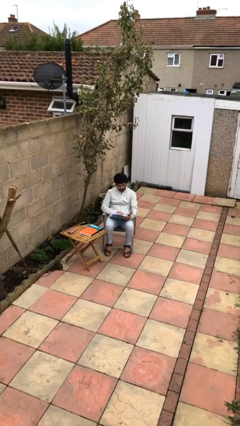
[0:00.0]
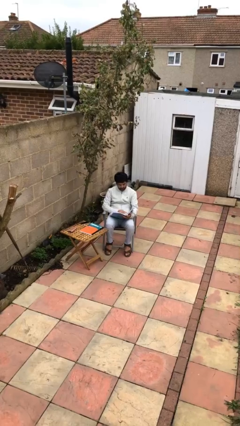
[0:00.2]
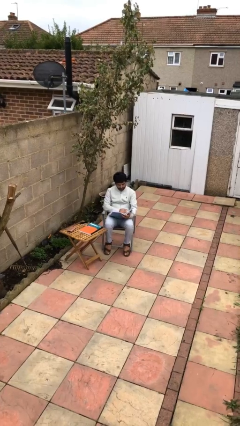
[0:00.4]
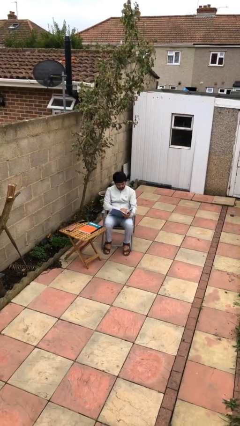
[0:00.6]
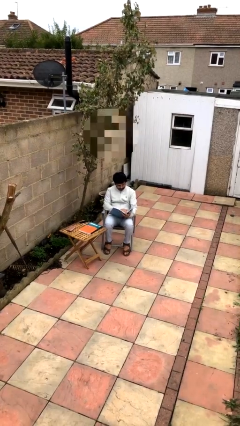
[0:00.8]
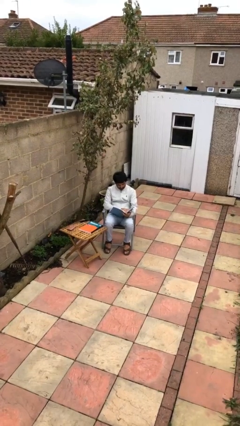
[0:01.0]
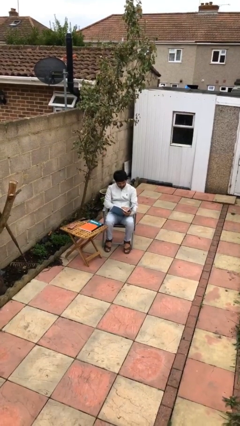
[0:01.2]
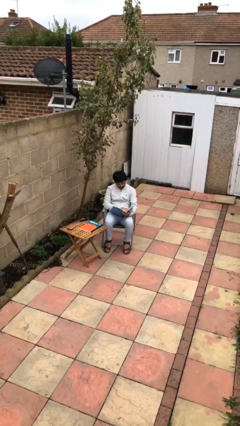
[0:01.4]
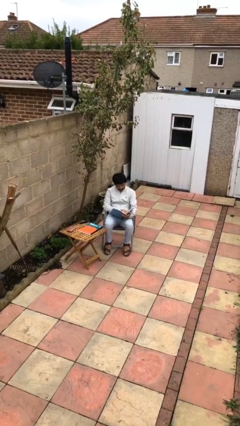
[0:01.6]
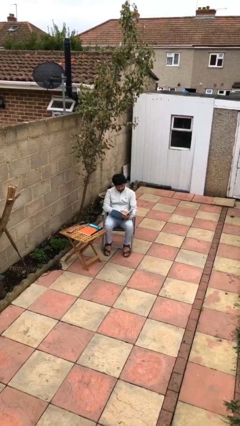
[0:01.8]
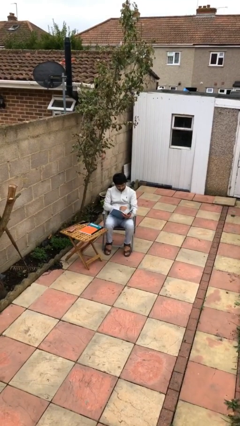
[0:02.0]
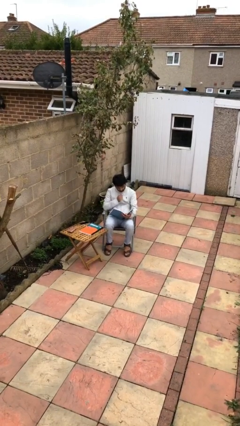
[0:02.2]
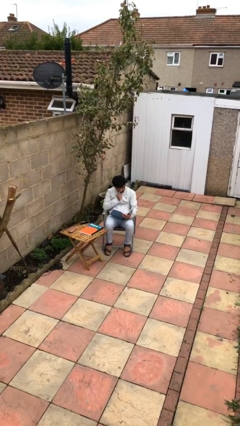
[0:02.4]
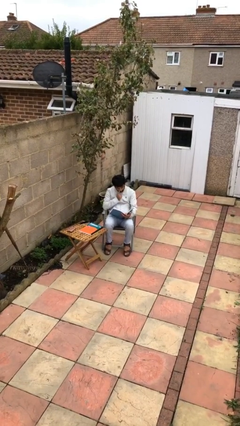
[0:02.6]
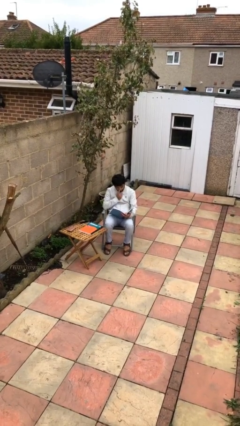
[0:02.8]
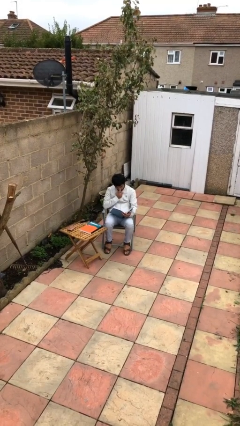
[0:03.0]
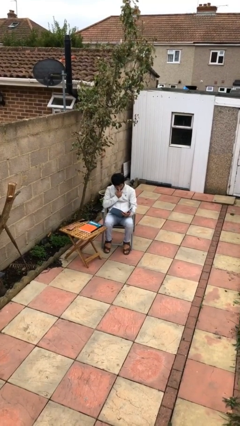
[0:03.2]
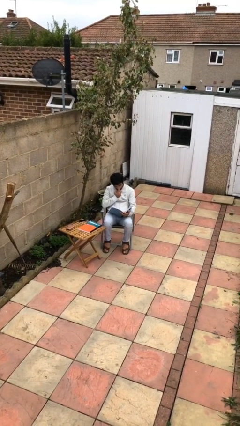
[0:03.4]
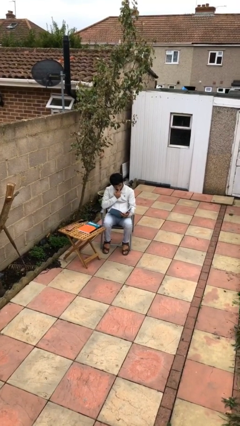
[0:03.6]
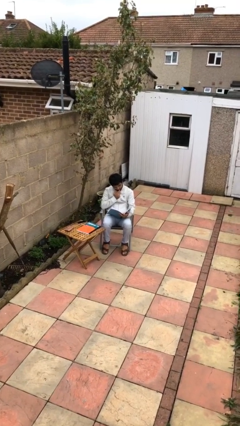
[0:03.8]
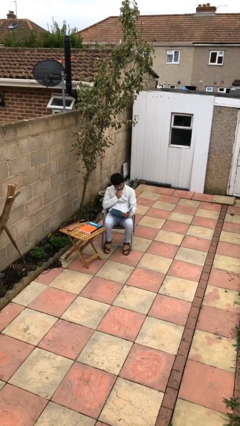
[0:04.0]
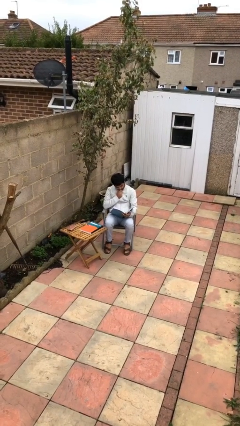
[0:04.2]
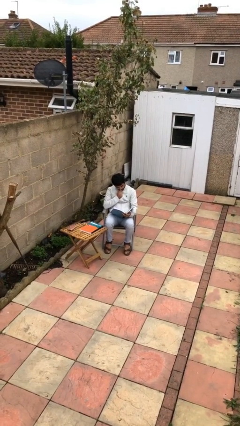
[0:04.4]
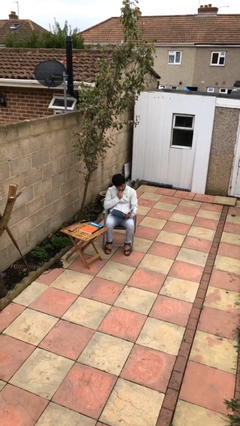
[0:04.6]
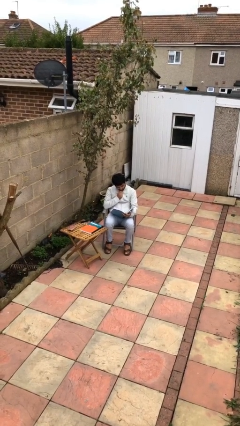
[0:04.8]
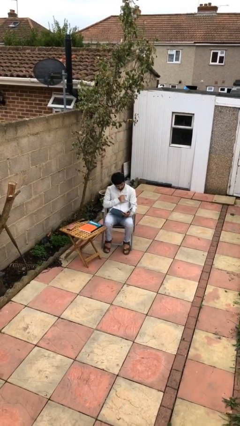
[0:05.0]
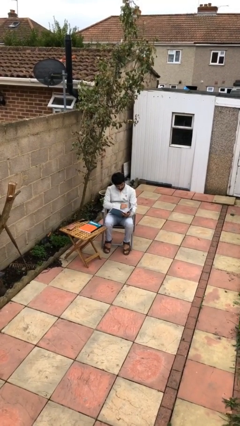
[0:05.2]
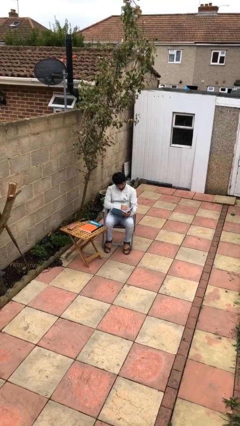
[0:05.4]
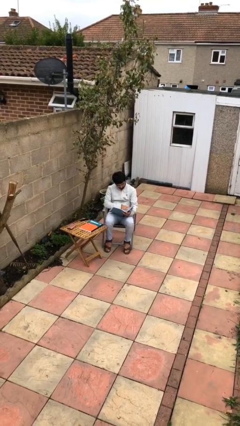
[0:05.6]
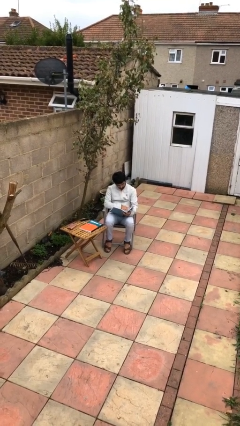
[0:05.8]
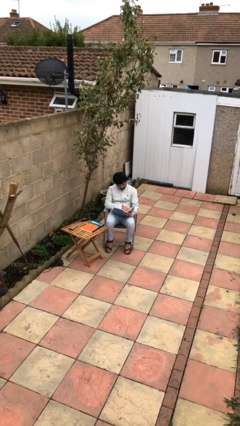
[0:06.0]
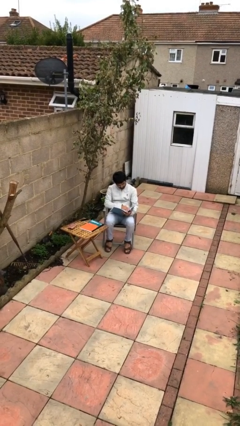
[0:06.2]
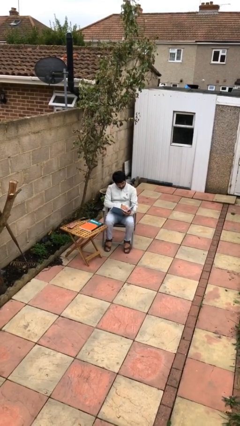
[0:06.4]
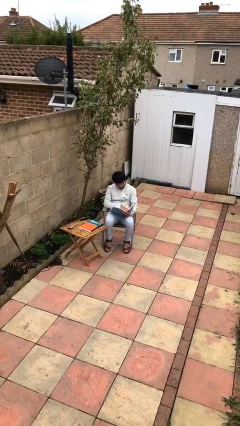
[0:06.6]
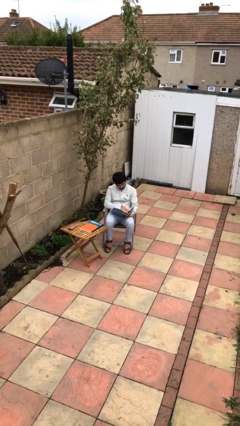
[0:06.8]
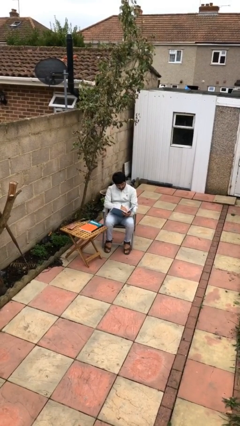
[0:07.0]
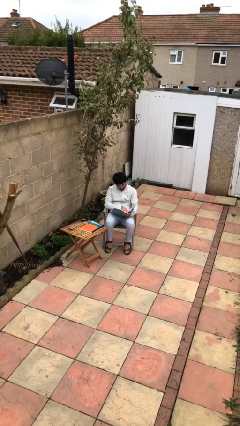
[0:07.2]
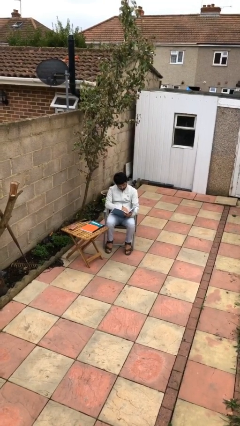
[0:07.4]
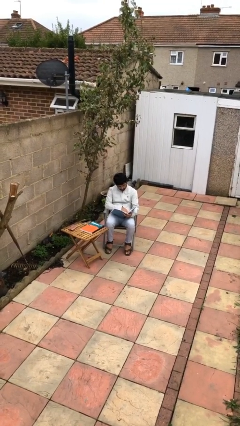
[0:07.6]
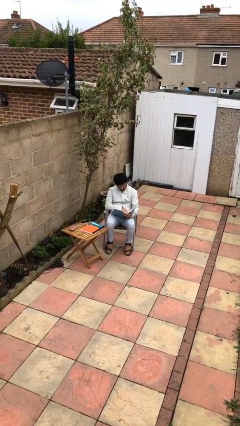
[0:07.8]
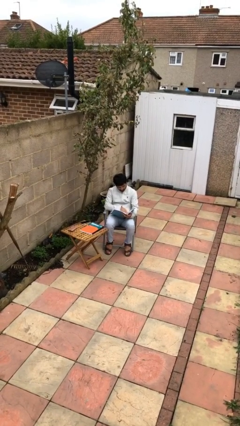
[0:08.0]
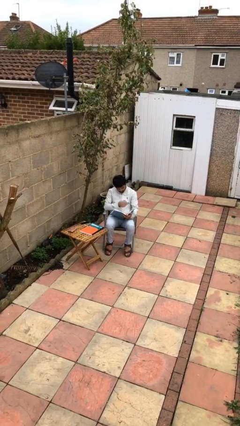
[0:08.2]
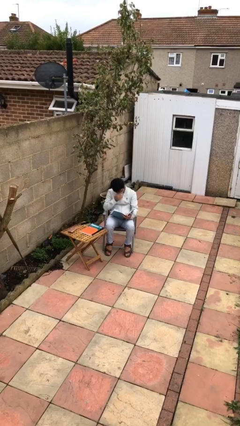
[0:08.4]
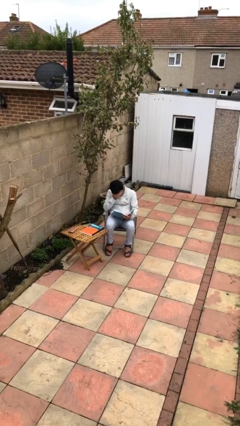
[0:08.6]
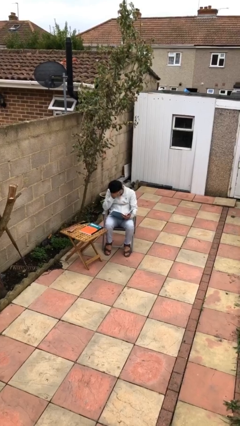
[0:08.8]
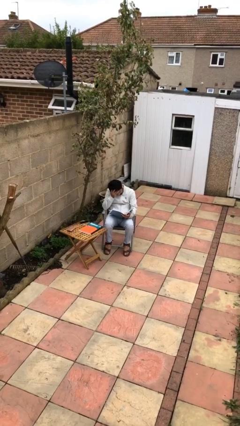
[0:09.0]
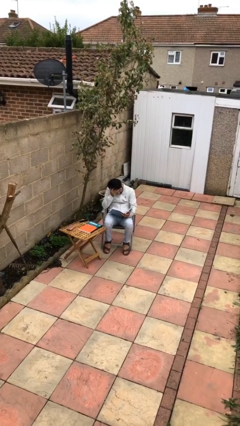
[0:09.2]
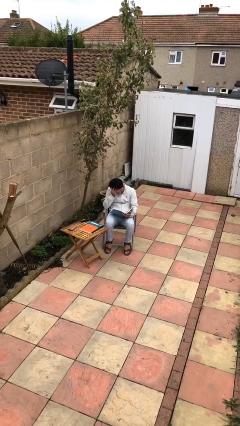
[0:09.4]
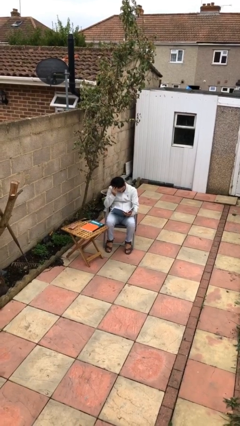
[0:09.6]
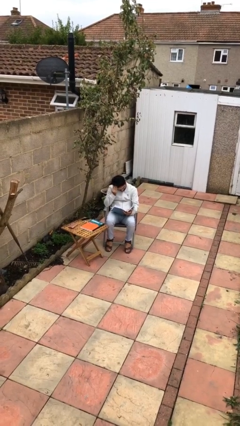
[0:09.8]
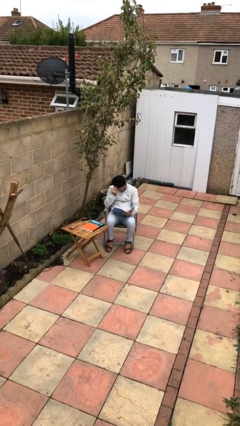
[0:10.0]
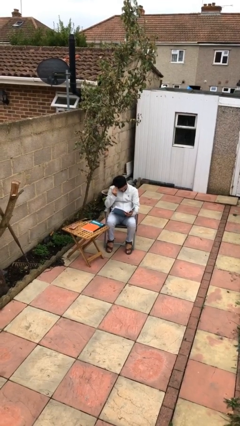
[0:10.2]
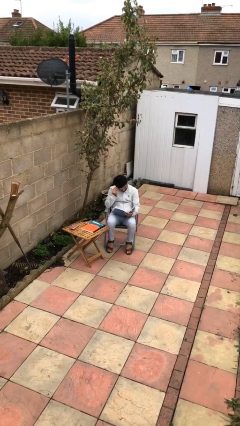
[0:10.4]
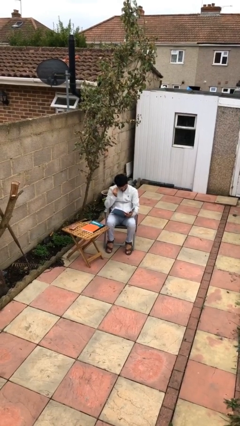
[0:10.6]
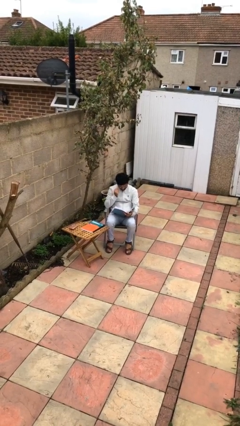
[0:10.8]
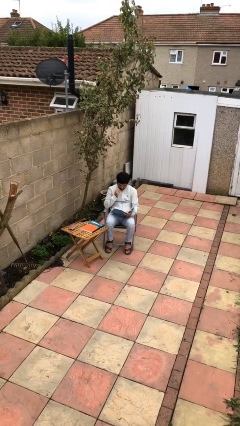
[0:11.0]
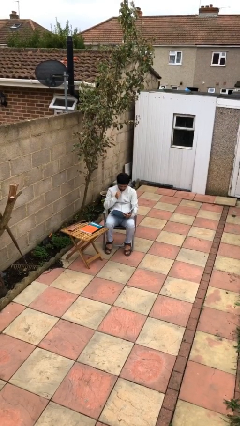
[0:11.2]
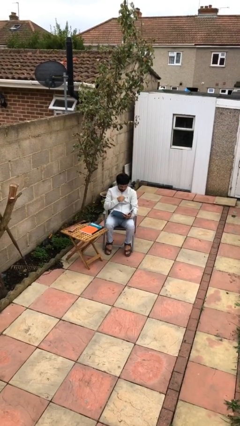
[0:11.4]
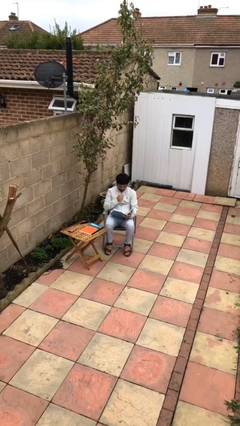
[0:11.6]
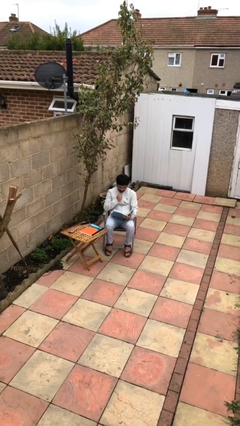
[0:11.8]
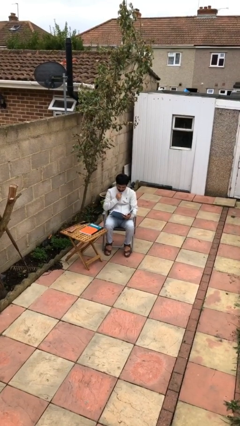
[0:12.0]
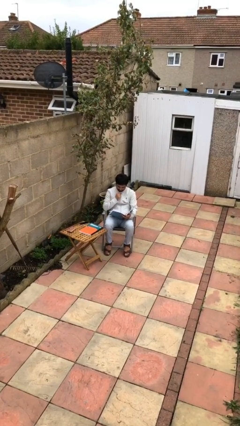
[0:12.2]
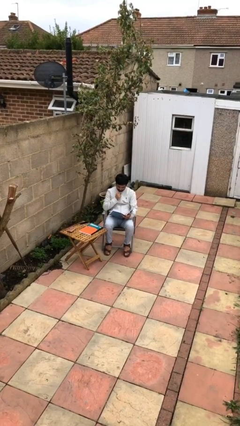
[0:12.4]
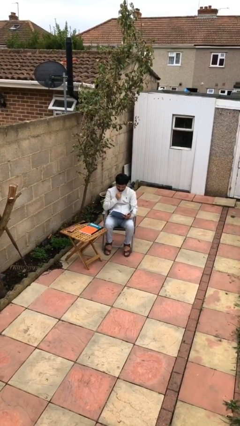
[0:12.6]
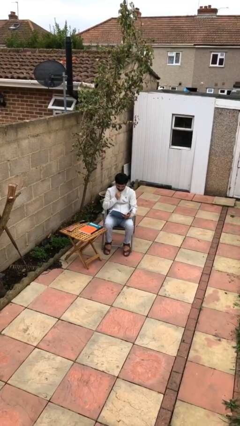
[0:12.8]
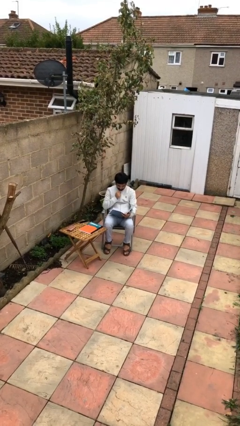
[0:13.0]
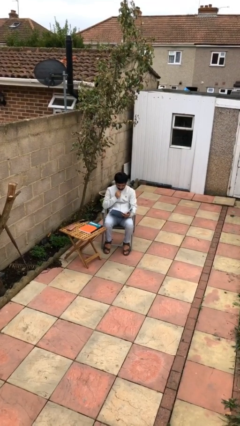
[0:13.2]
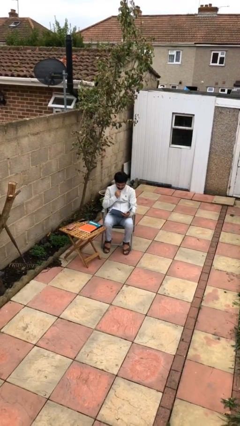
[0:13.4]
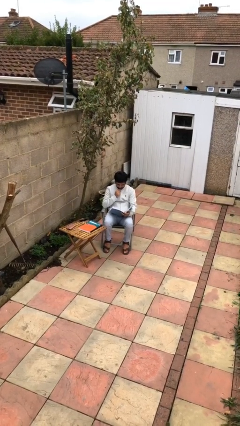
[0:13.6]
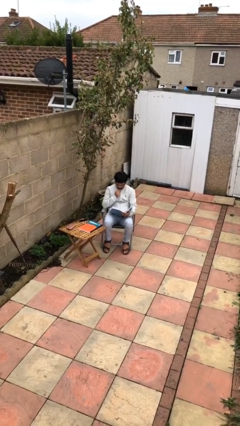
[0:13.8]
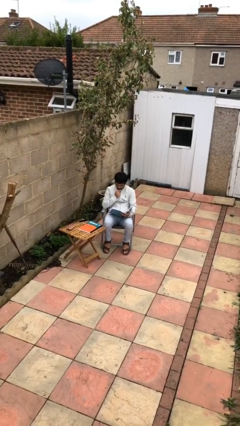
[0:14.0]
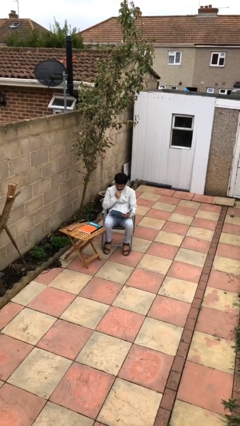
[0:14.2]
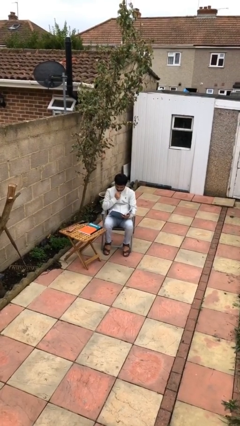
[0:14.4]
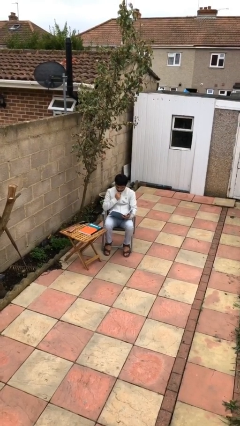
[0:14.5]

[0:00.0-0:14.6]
person reads document

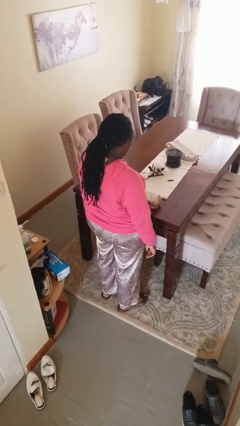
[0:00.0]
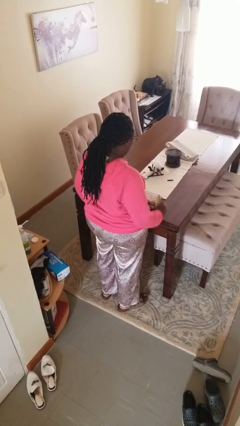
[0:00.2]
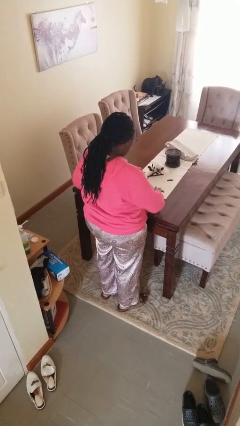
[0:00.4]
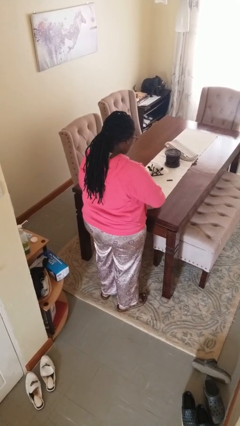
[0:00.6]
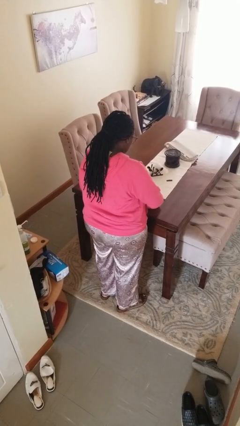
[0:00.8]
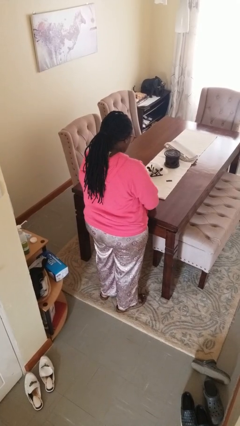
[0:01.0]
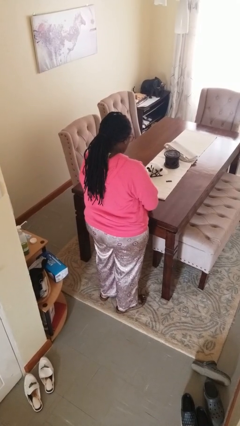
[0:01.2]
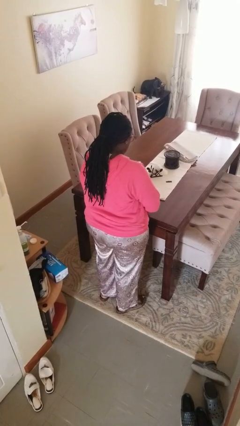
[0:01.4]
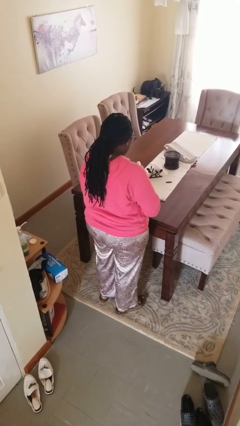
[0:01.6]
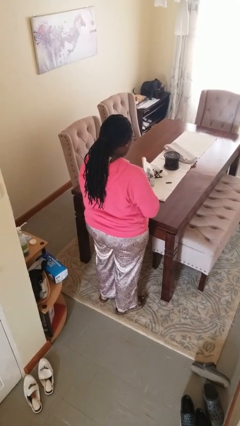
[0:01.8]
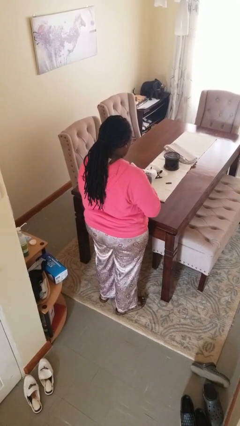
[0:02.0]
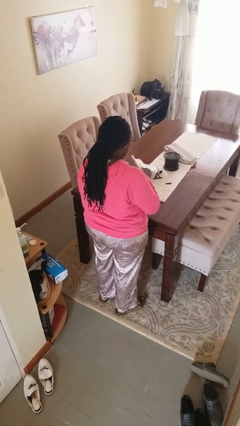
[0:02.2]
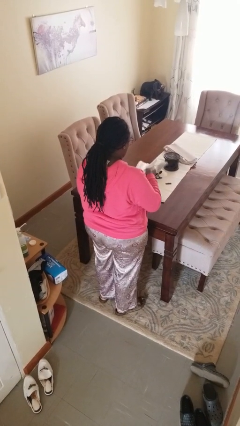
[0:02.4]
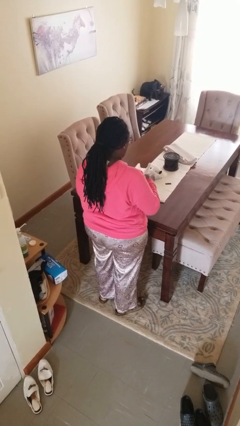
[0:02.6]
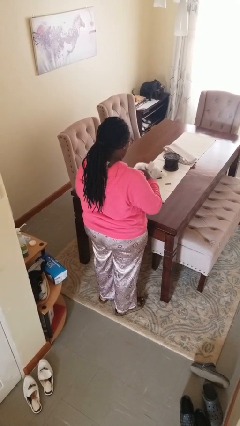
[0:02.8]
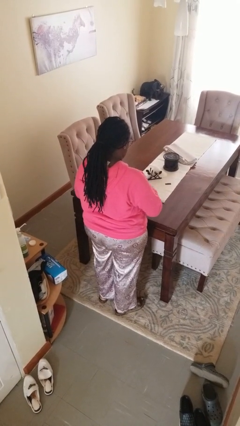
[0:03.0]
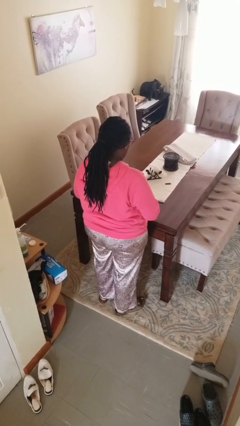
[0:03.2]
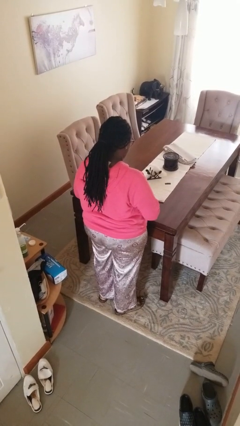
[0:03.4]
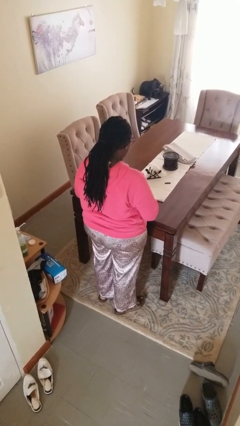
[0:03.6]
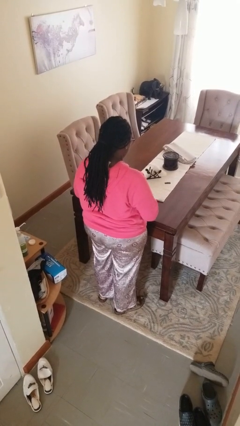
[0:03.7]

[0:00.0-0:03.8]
person wraps box
